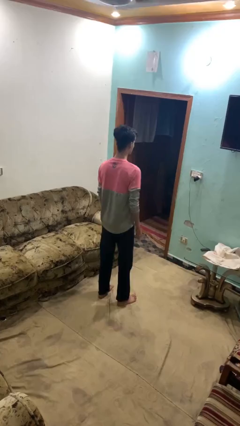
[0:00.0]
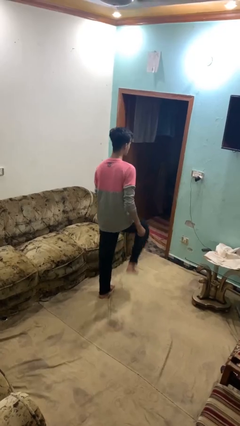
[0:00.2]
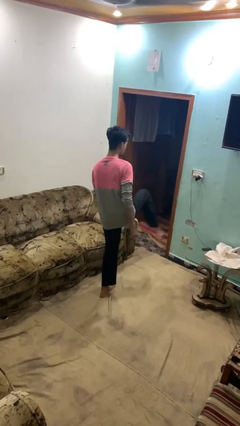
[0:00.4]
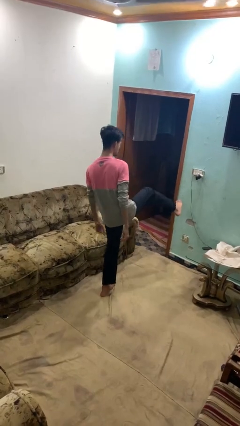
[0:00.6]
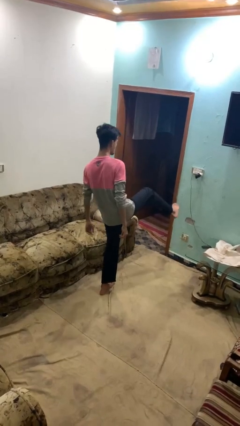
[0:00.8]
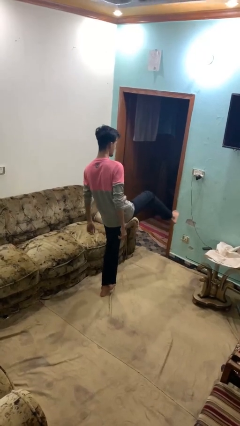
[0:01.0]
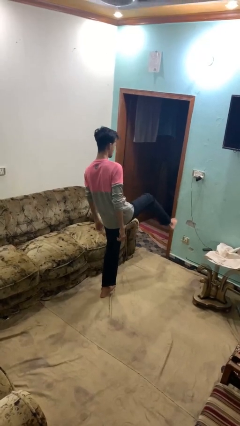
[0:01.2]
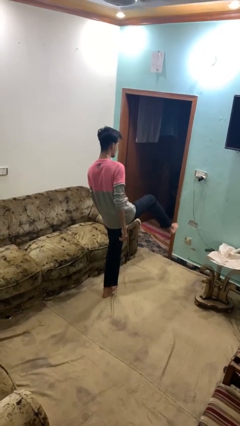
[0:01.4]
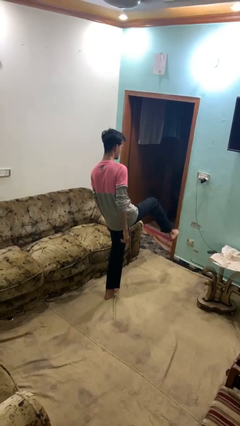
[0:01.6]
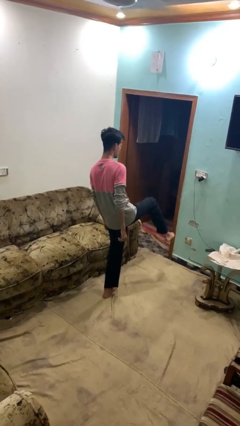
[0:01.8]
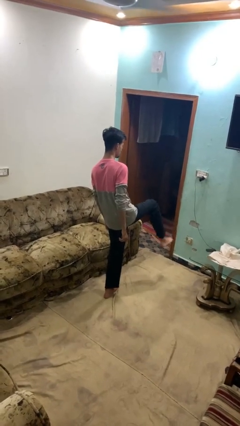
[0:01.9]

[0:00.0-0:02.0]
person karate kicks

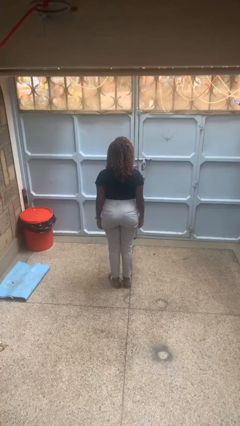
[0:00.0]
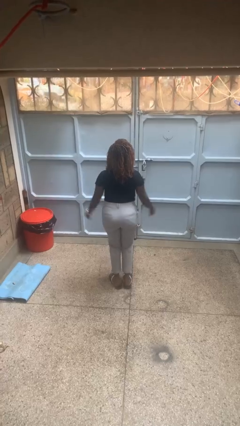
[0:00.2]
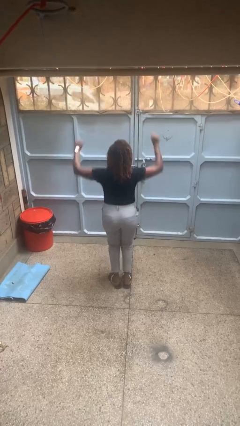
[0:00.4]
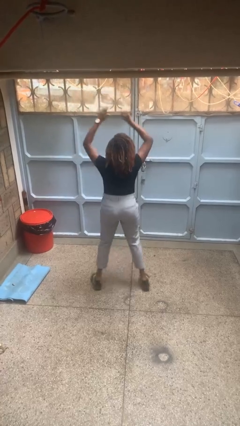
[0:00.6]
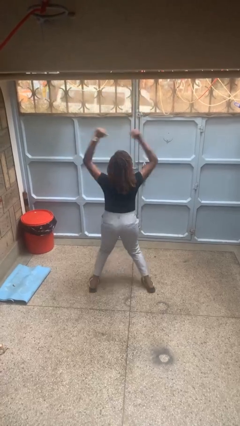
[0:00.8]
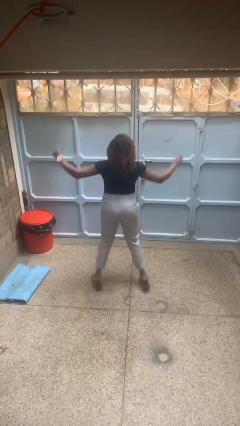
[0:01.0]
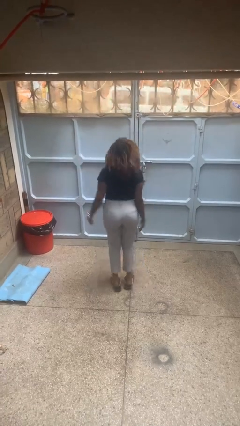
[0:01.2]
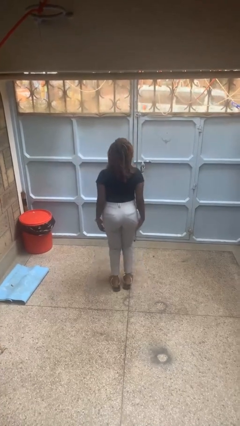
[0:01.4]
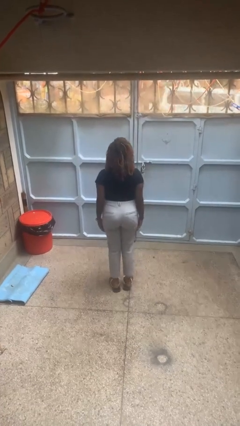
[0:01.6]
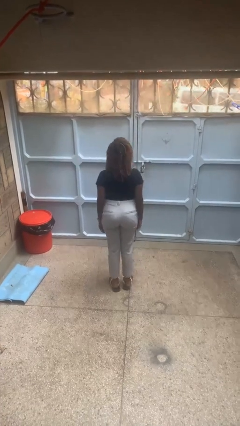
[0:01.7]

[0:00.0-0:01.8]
person exercises with jumping jacks

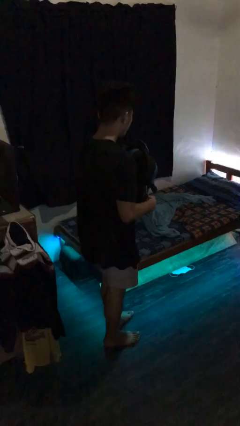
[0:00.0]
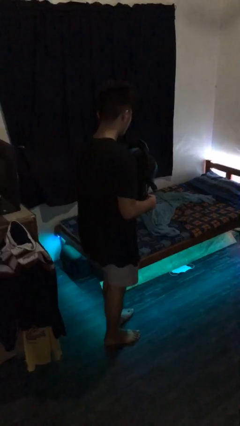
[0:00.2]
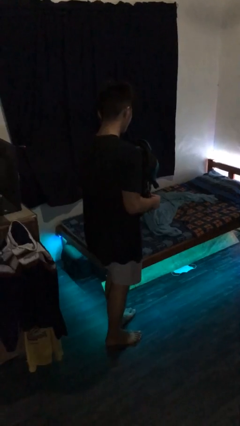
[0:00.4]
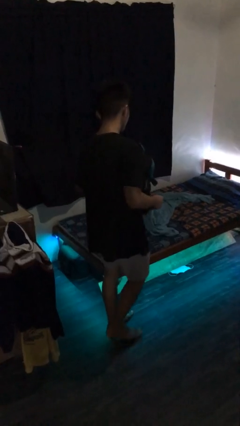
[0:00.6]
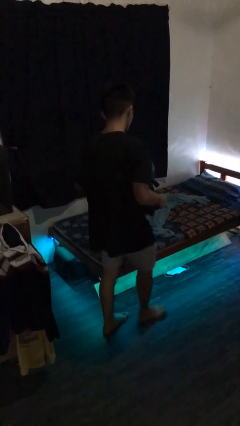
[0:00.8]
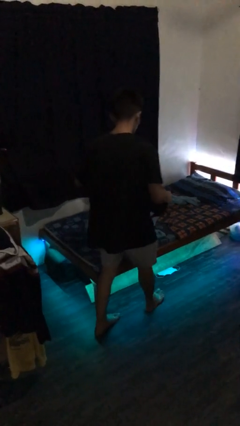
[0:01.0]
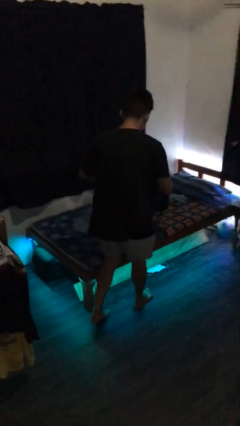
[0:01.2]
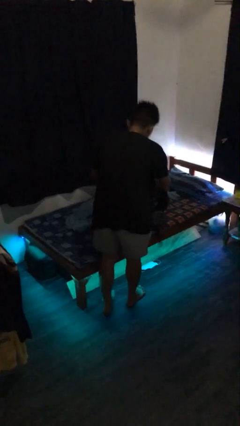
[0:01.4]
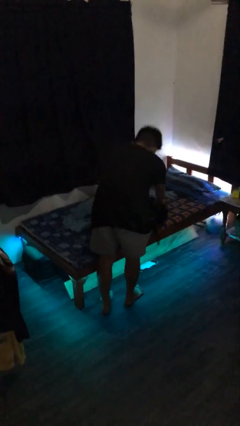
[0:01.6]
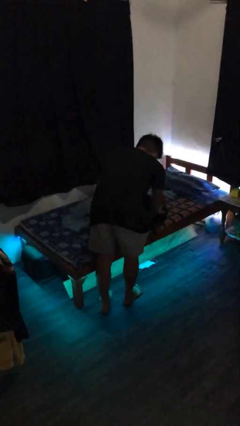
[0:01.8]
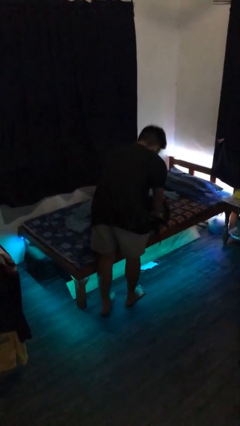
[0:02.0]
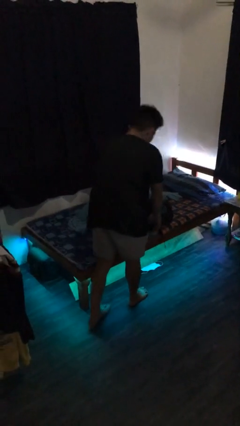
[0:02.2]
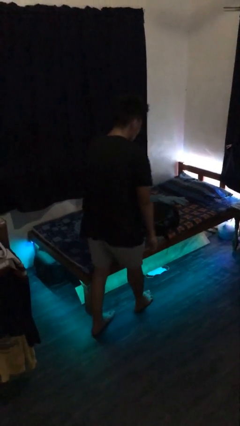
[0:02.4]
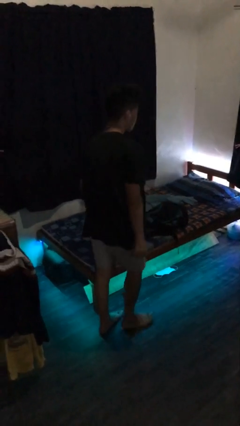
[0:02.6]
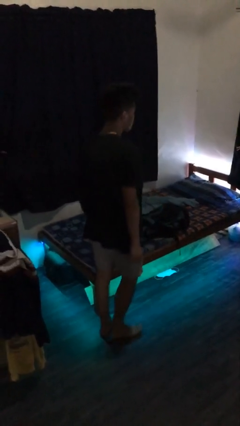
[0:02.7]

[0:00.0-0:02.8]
person puts down object on bed

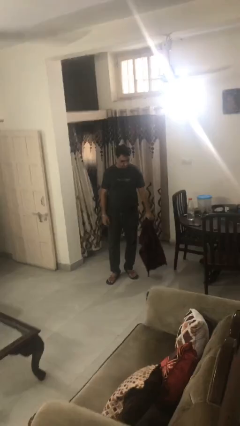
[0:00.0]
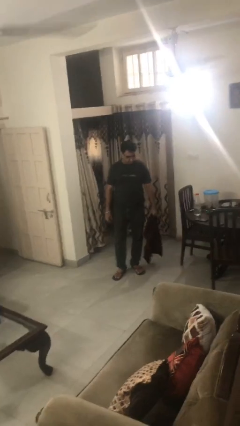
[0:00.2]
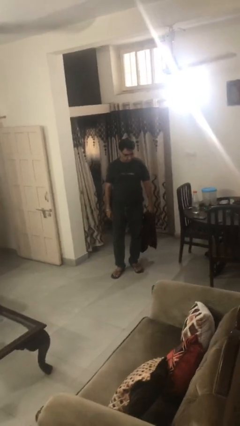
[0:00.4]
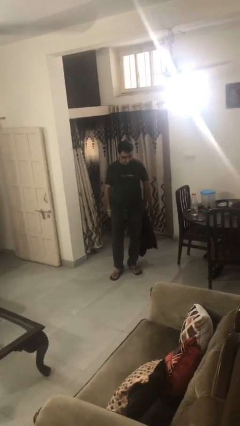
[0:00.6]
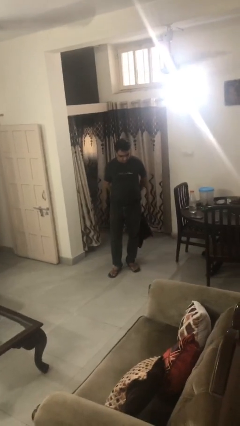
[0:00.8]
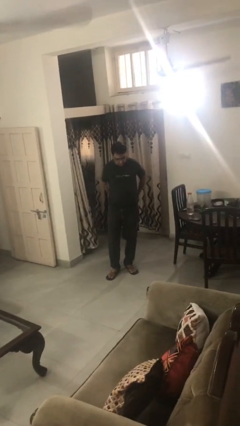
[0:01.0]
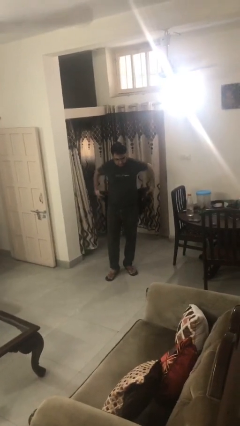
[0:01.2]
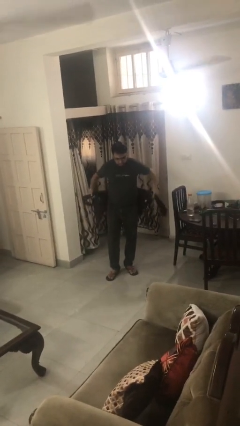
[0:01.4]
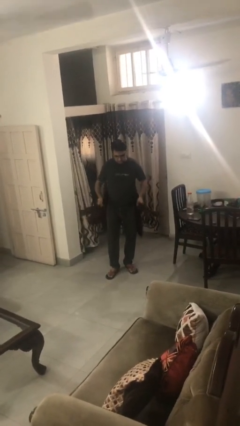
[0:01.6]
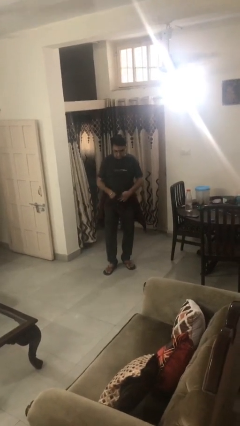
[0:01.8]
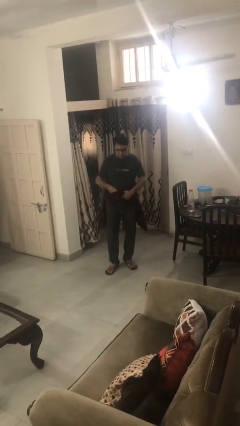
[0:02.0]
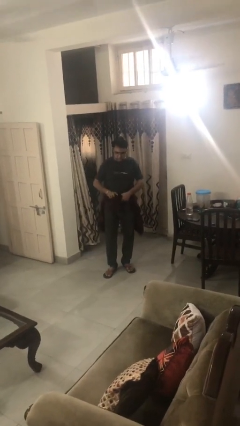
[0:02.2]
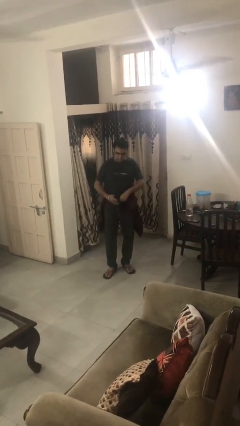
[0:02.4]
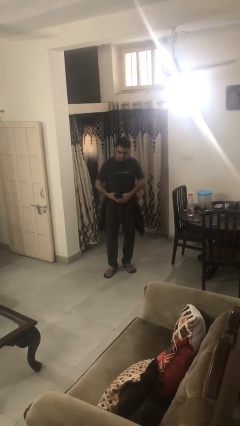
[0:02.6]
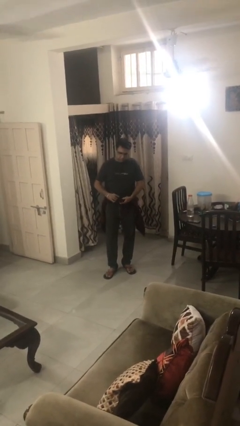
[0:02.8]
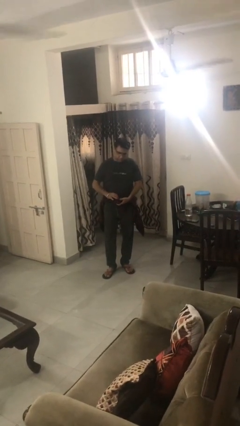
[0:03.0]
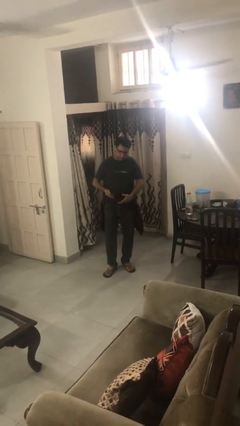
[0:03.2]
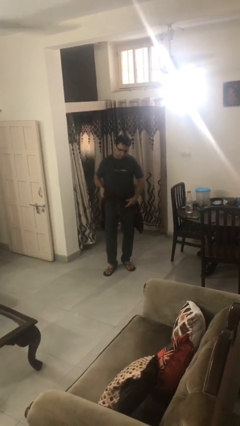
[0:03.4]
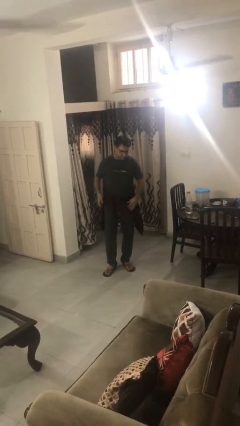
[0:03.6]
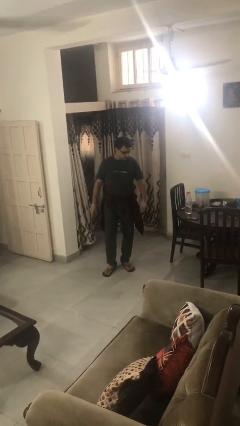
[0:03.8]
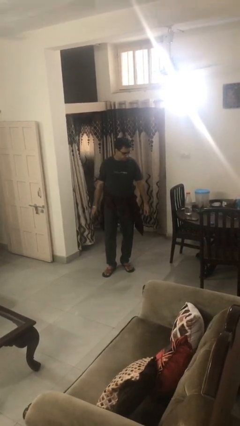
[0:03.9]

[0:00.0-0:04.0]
person ties jacket around waist

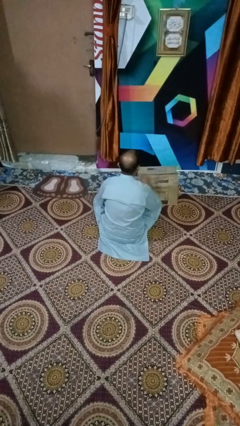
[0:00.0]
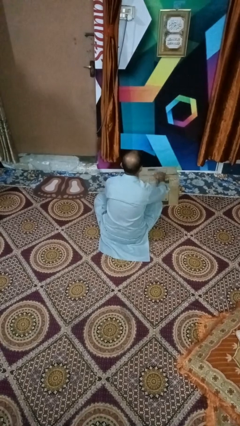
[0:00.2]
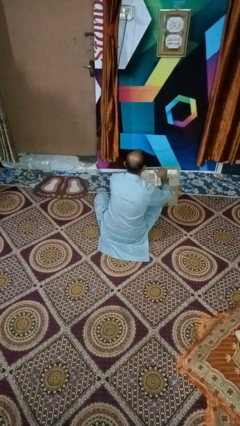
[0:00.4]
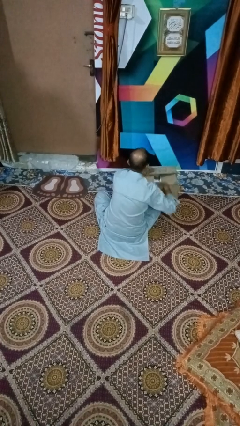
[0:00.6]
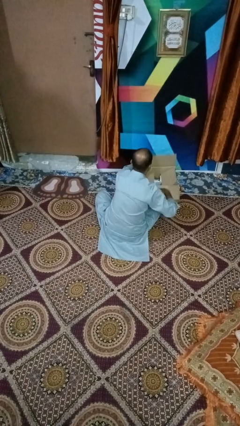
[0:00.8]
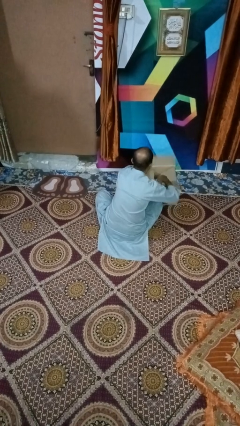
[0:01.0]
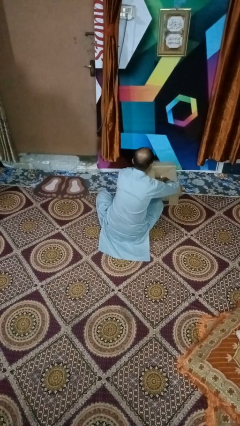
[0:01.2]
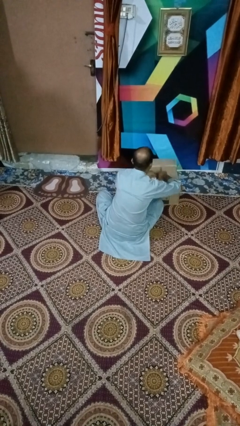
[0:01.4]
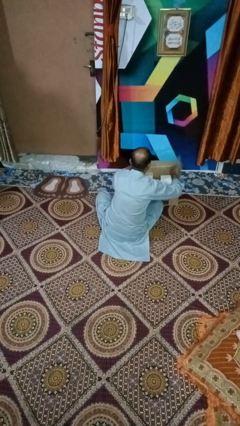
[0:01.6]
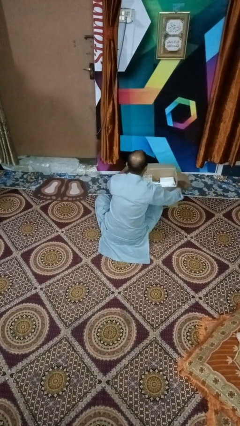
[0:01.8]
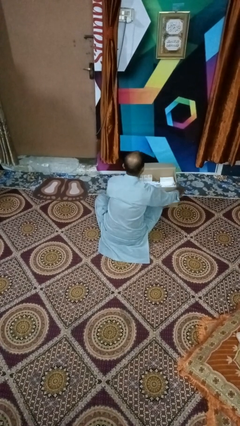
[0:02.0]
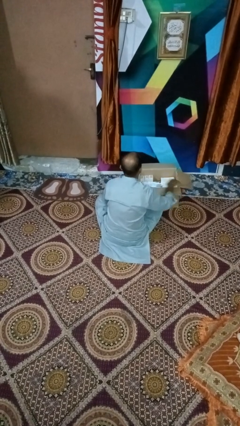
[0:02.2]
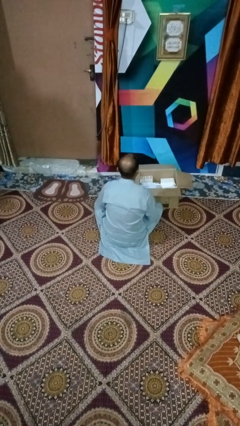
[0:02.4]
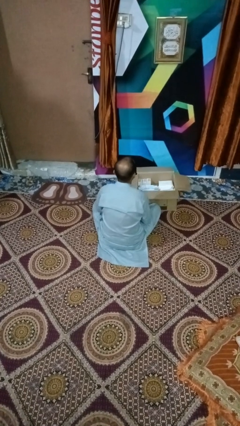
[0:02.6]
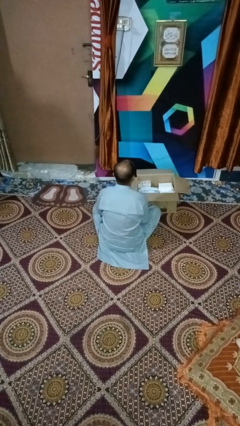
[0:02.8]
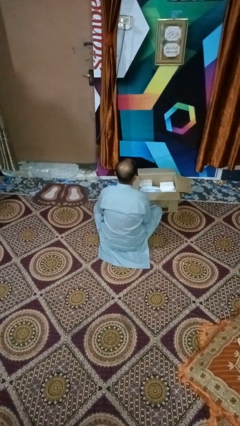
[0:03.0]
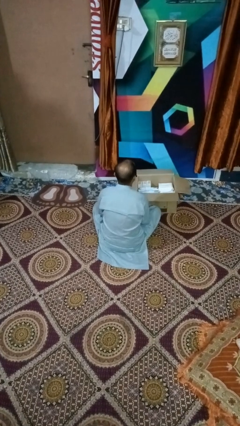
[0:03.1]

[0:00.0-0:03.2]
person opens box

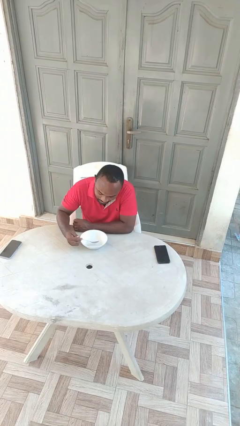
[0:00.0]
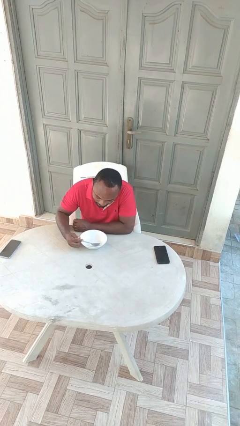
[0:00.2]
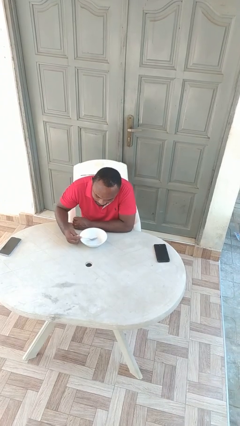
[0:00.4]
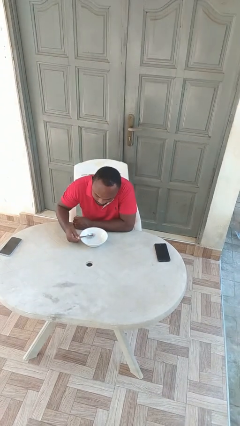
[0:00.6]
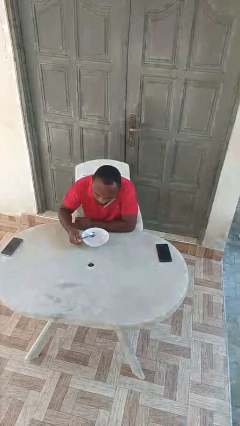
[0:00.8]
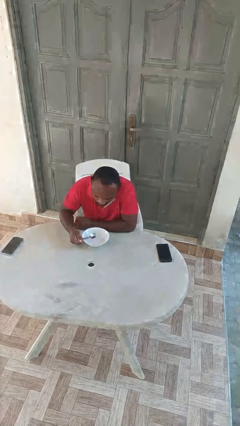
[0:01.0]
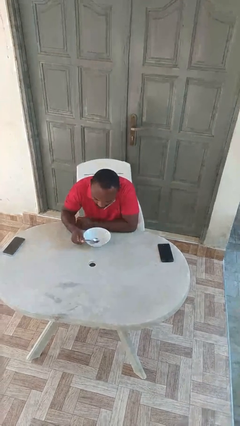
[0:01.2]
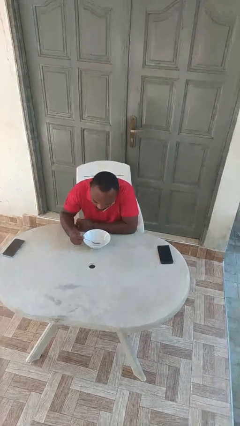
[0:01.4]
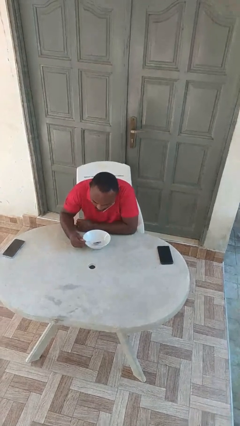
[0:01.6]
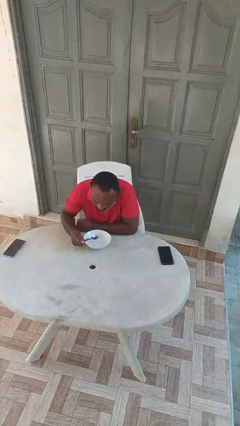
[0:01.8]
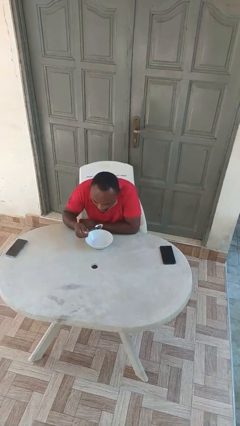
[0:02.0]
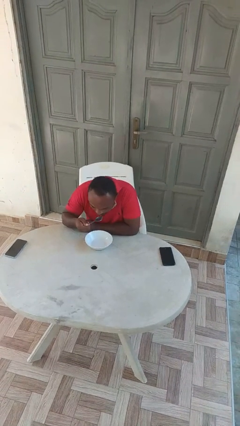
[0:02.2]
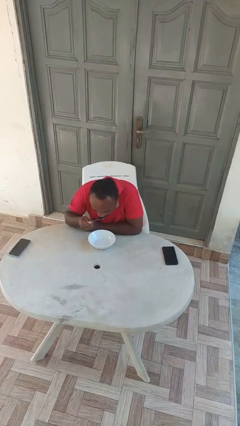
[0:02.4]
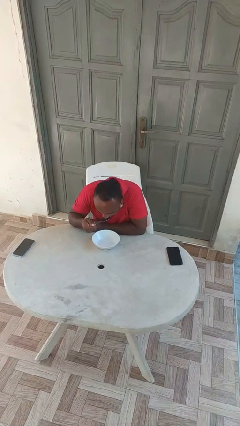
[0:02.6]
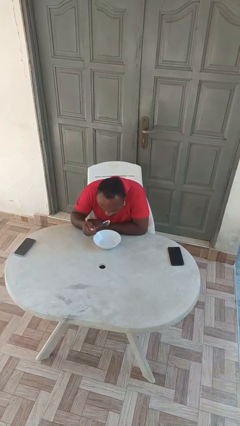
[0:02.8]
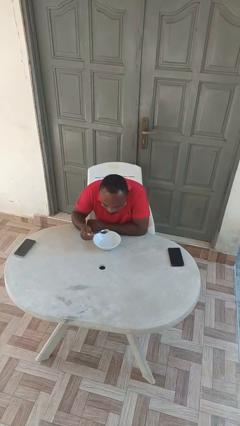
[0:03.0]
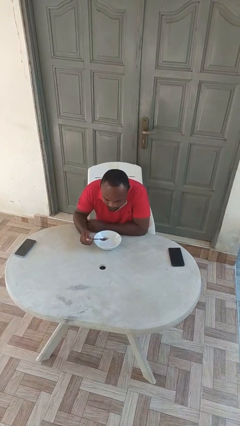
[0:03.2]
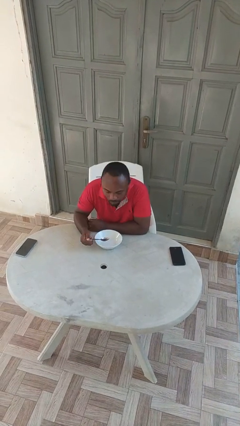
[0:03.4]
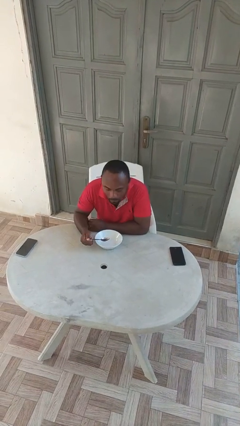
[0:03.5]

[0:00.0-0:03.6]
person eats with utensil

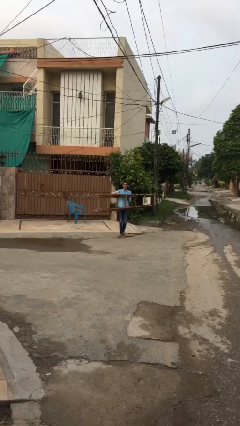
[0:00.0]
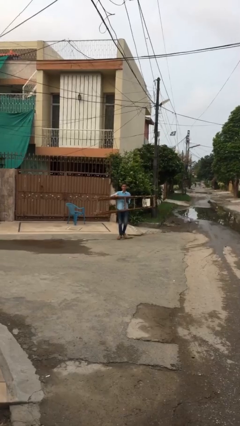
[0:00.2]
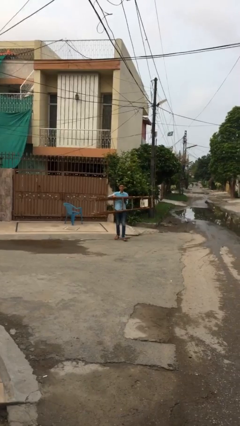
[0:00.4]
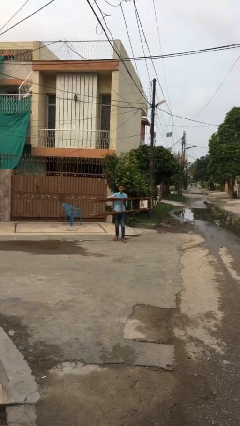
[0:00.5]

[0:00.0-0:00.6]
person puts down object on floor
